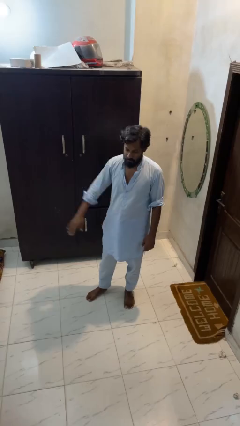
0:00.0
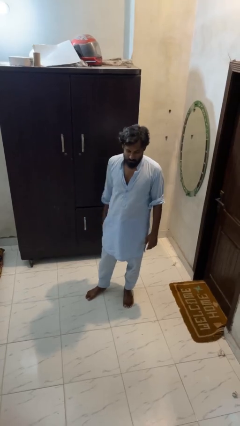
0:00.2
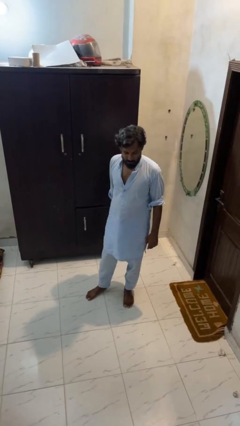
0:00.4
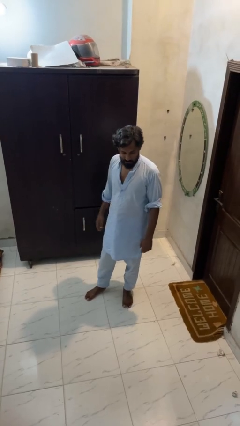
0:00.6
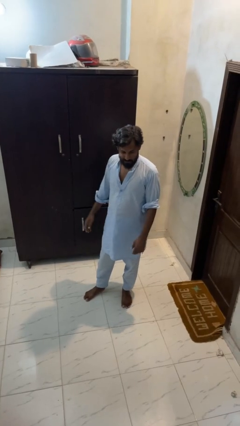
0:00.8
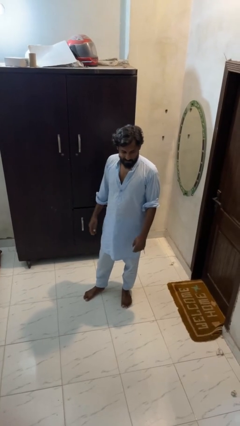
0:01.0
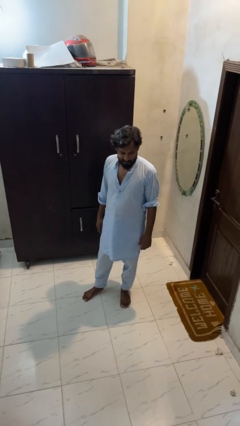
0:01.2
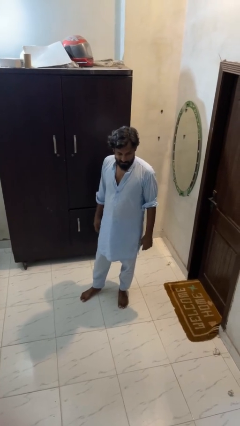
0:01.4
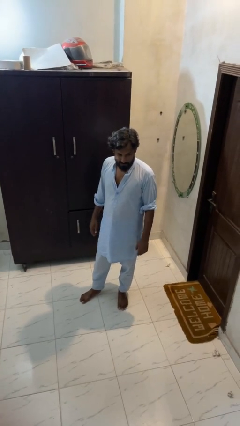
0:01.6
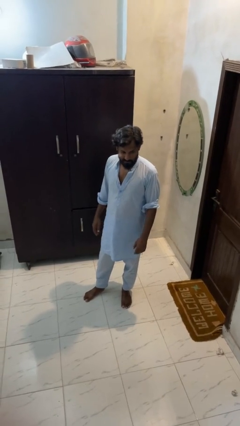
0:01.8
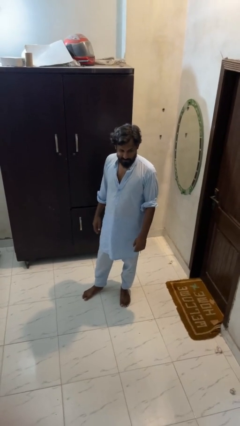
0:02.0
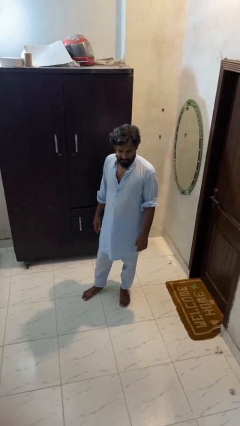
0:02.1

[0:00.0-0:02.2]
person gestures lower hand

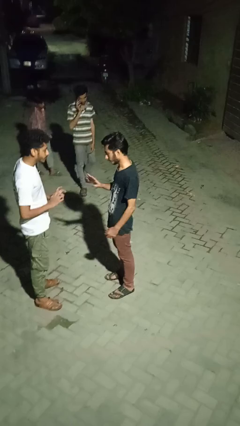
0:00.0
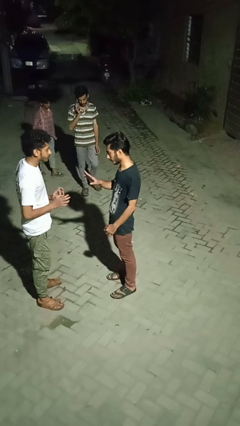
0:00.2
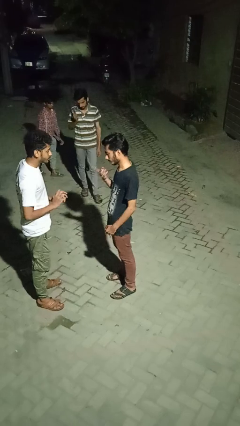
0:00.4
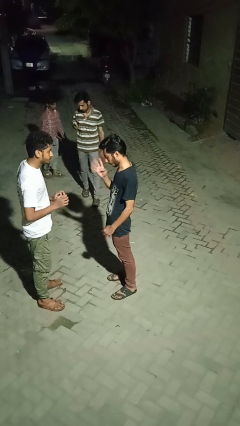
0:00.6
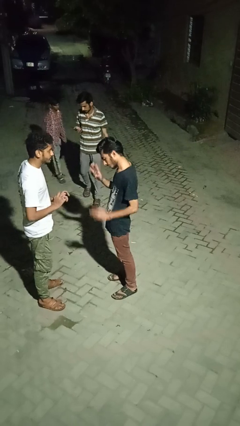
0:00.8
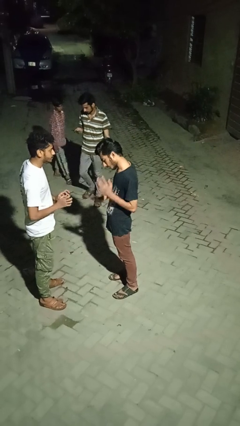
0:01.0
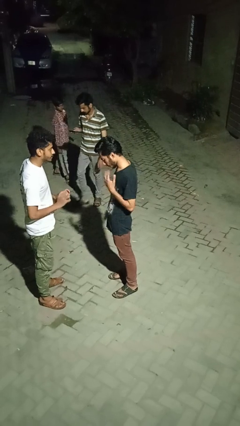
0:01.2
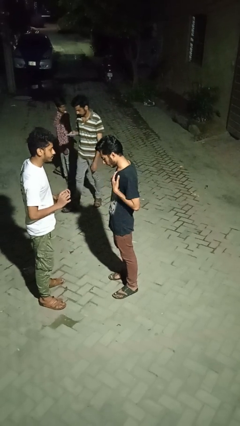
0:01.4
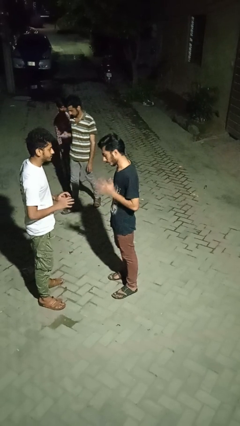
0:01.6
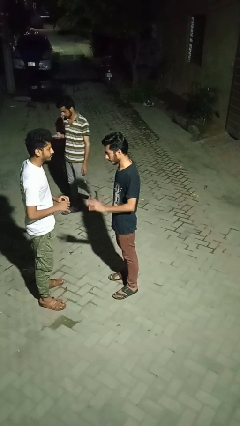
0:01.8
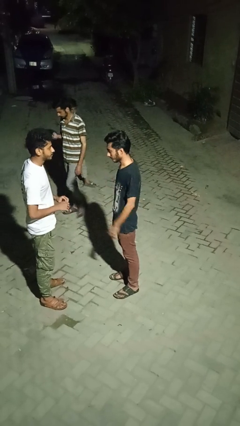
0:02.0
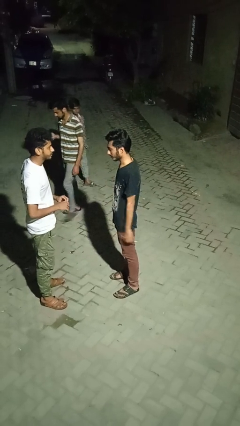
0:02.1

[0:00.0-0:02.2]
person talks to person

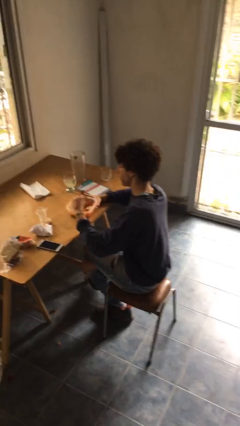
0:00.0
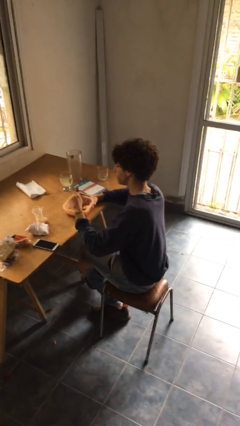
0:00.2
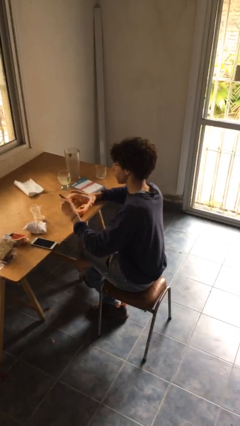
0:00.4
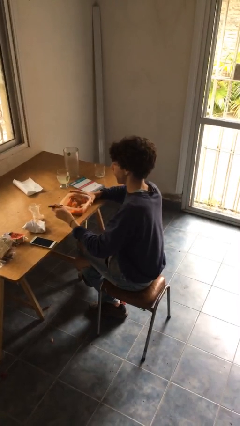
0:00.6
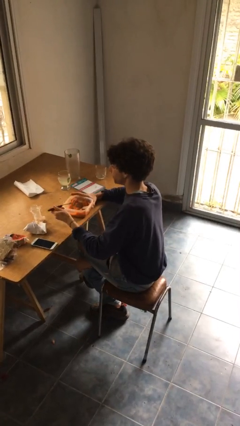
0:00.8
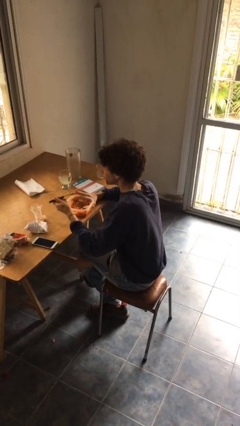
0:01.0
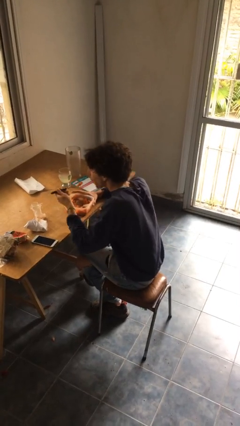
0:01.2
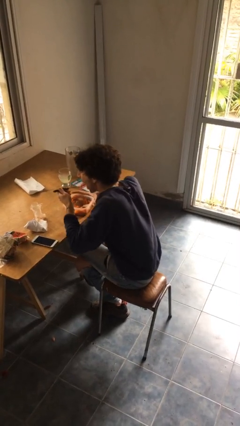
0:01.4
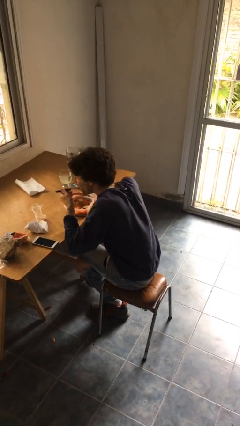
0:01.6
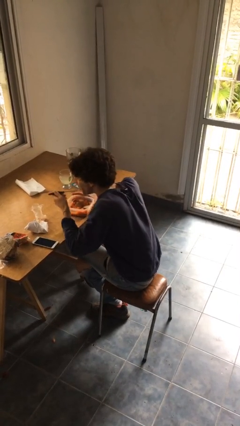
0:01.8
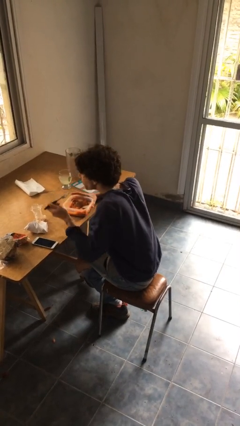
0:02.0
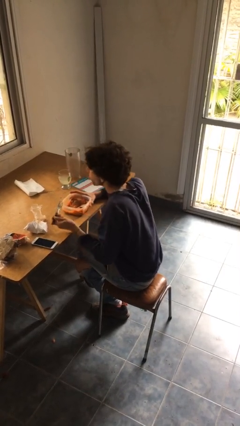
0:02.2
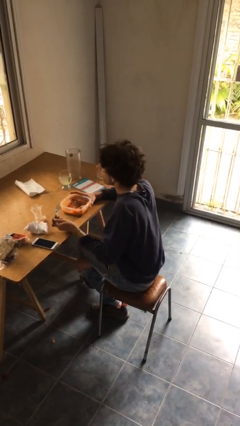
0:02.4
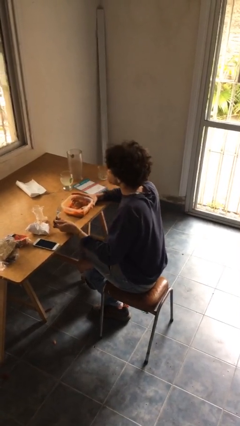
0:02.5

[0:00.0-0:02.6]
person eats with utensil

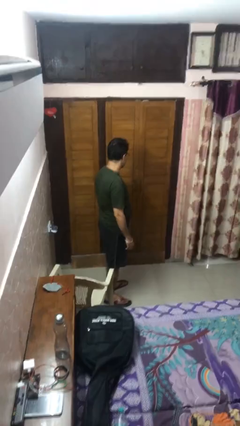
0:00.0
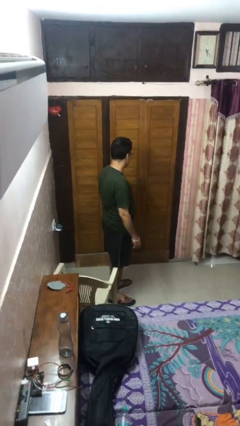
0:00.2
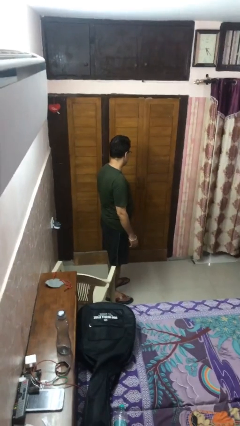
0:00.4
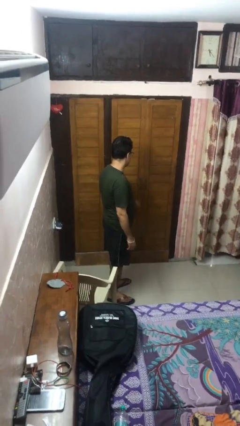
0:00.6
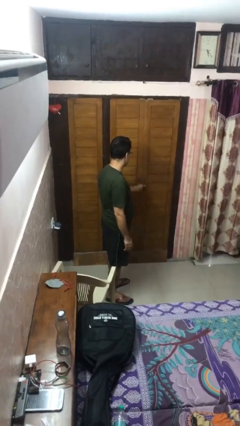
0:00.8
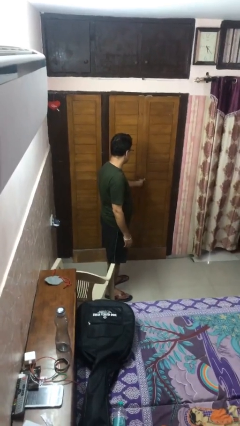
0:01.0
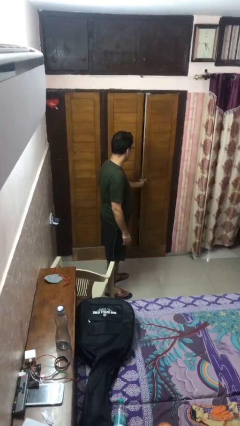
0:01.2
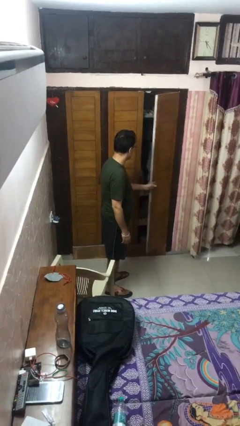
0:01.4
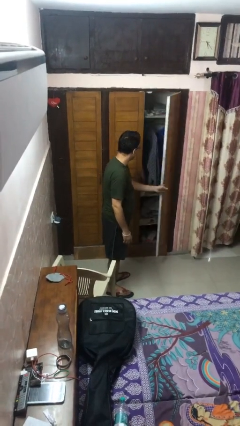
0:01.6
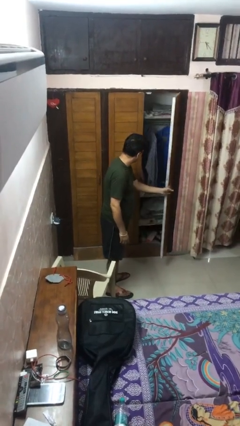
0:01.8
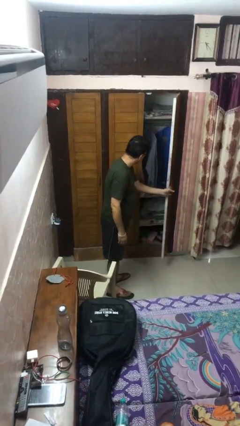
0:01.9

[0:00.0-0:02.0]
person opens closet door

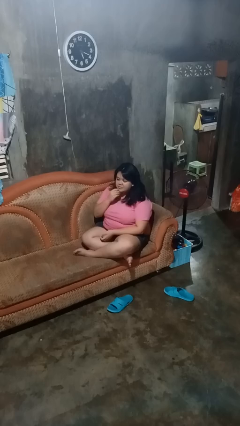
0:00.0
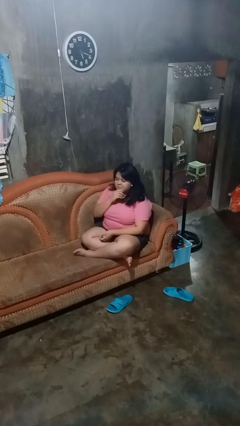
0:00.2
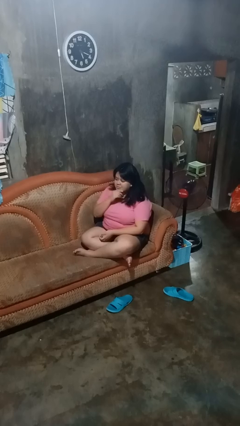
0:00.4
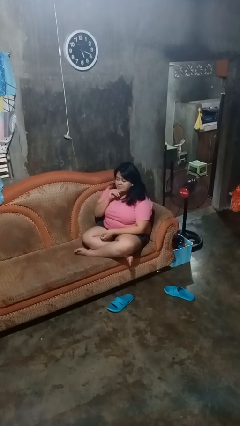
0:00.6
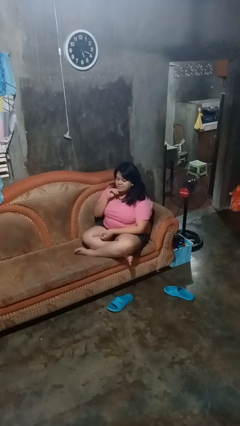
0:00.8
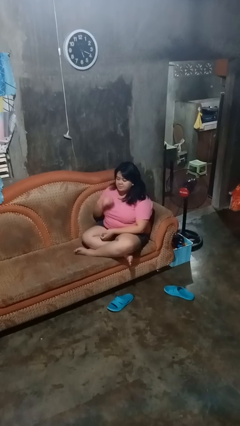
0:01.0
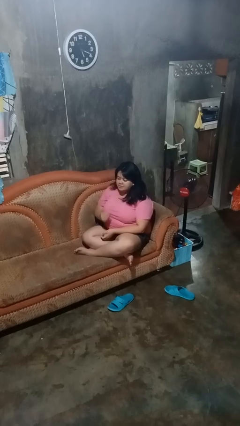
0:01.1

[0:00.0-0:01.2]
person strokes chin

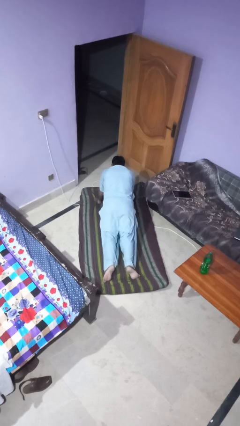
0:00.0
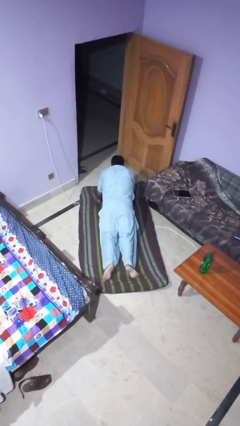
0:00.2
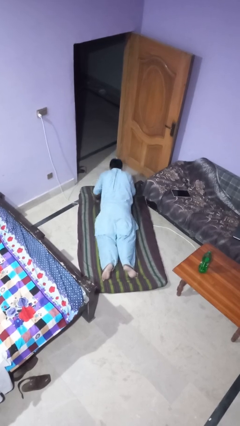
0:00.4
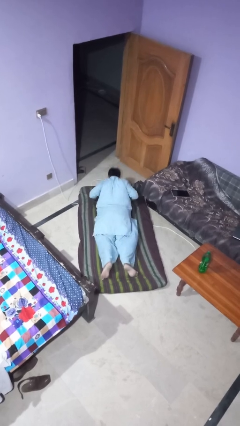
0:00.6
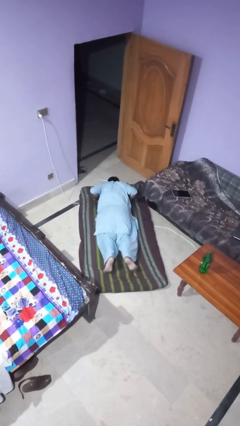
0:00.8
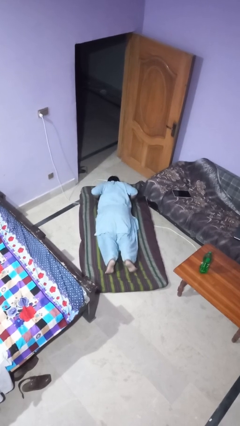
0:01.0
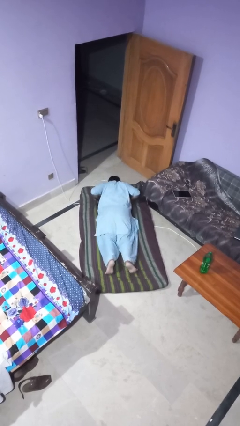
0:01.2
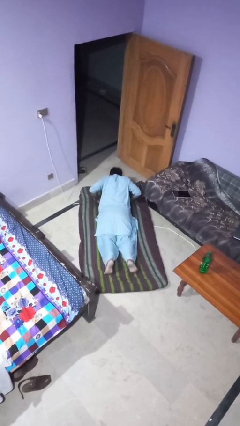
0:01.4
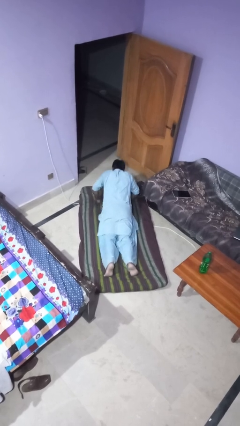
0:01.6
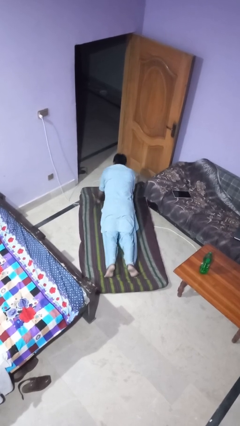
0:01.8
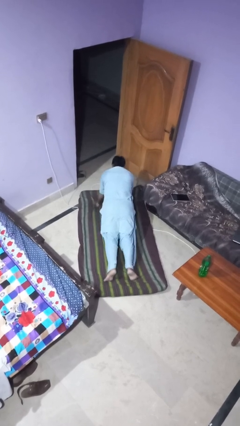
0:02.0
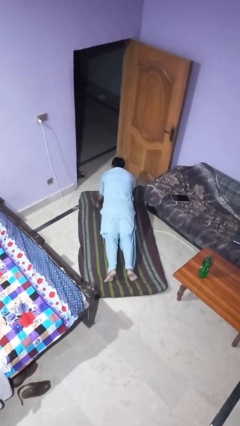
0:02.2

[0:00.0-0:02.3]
person exercises with pushup

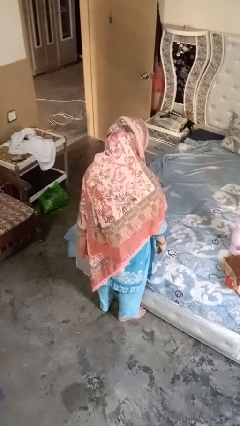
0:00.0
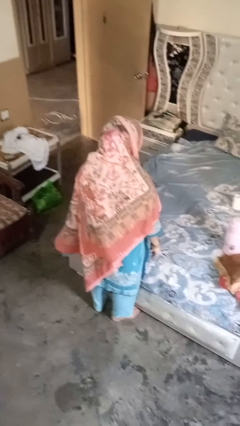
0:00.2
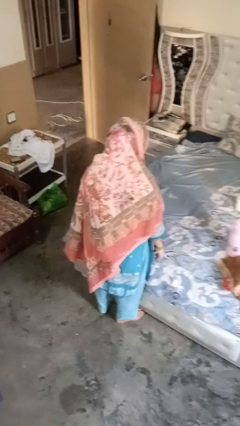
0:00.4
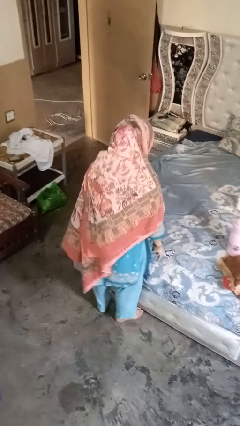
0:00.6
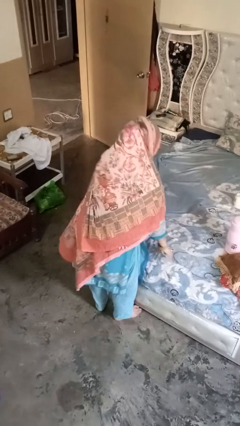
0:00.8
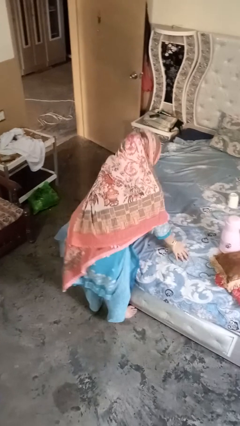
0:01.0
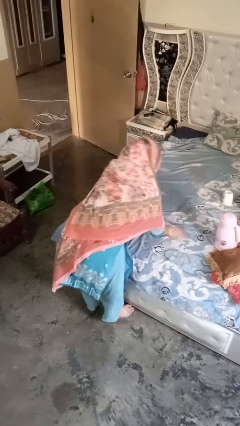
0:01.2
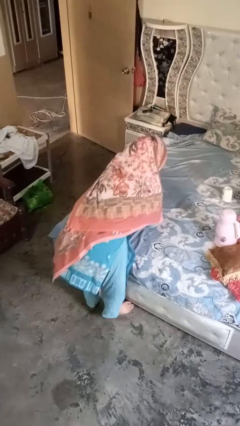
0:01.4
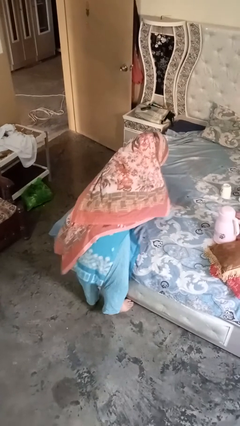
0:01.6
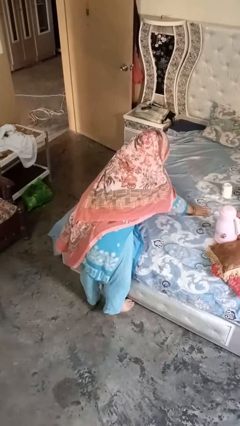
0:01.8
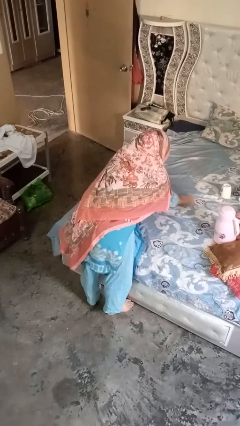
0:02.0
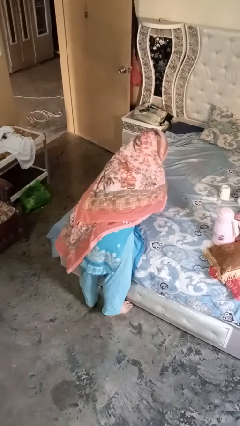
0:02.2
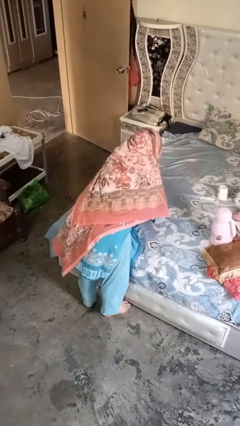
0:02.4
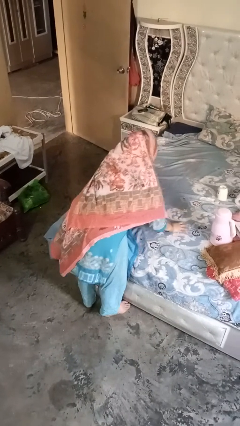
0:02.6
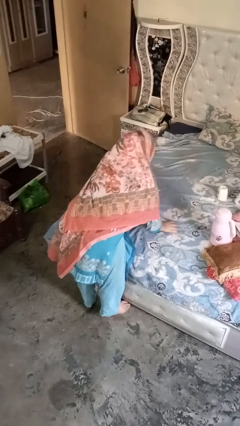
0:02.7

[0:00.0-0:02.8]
person searches under bed

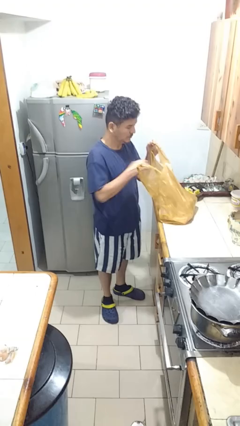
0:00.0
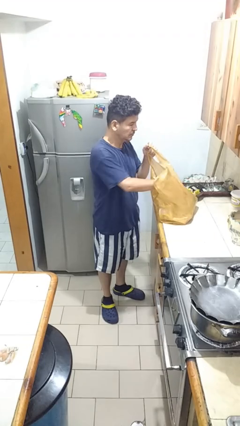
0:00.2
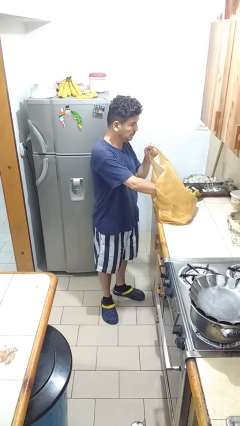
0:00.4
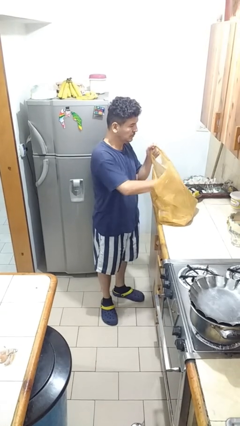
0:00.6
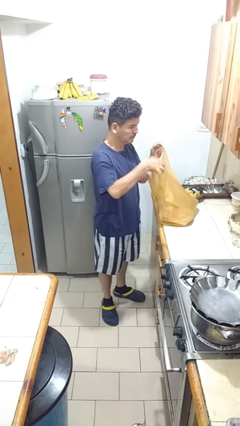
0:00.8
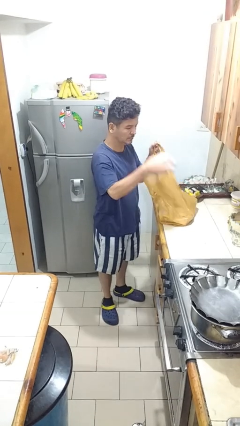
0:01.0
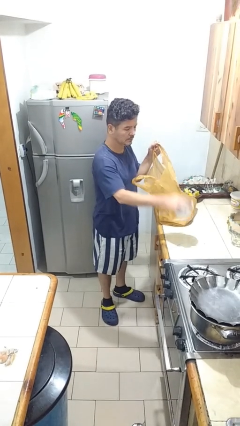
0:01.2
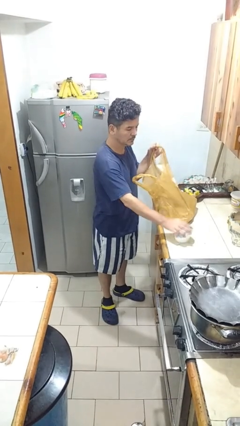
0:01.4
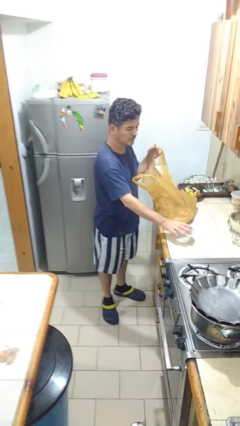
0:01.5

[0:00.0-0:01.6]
person takes object from bag
